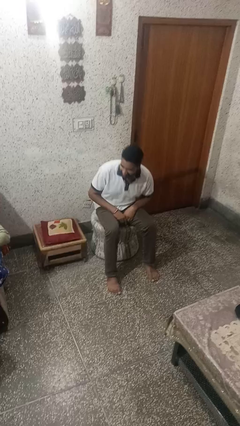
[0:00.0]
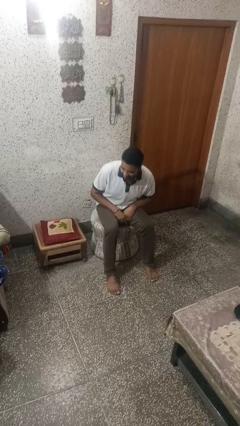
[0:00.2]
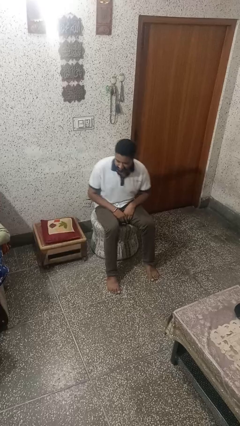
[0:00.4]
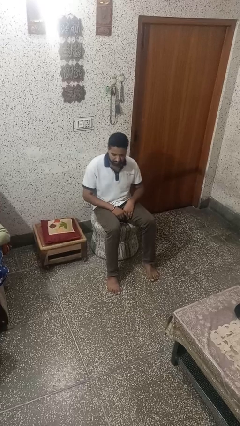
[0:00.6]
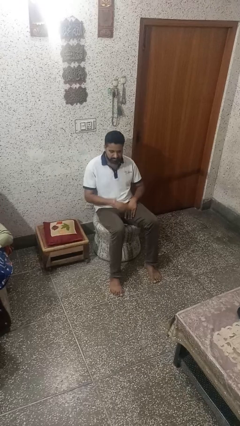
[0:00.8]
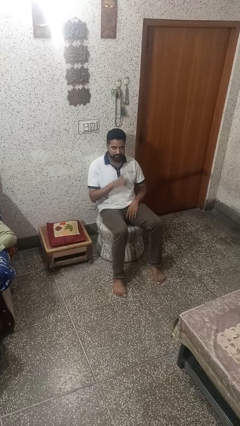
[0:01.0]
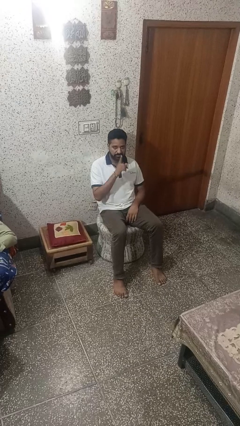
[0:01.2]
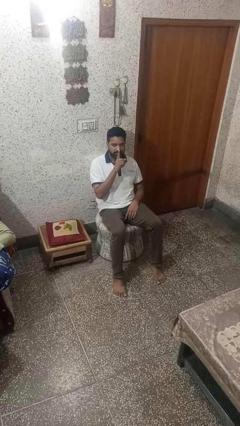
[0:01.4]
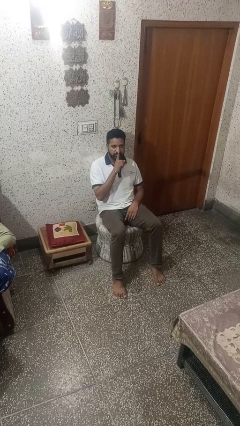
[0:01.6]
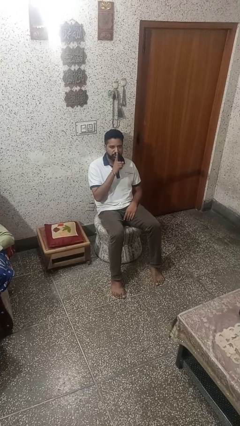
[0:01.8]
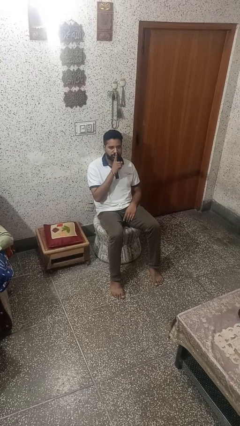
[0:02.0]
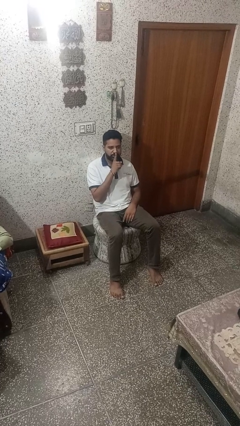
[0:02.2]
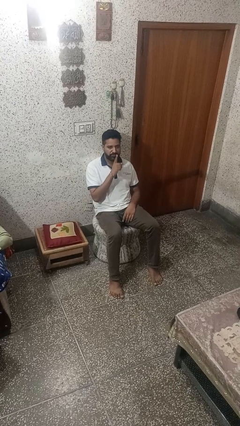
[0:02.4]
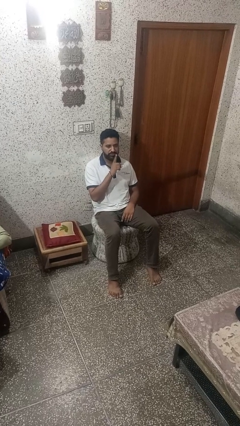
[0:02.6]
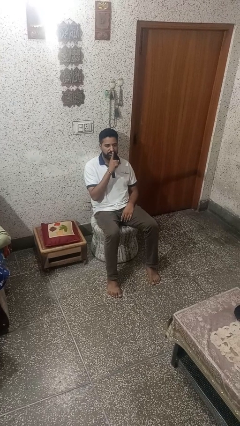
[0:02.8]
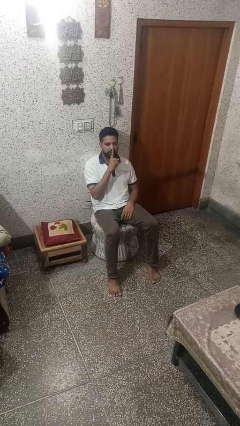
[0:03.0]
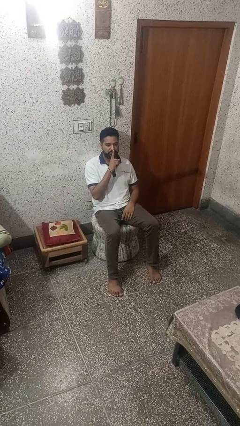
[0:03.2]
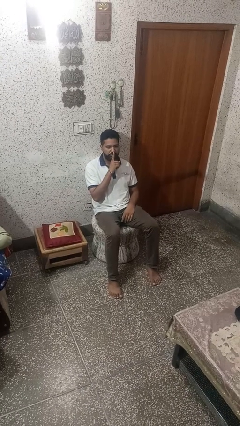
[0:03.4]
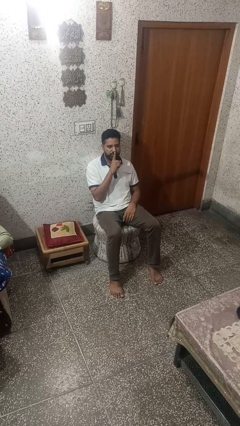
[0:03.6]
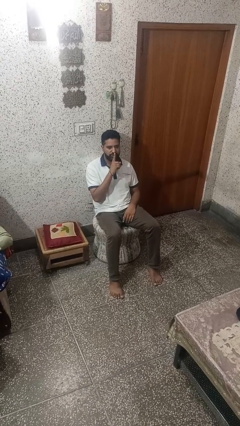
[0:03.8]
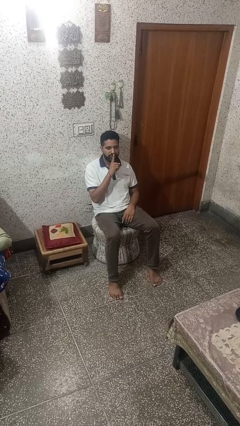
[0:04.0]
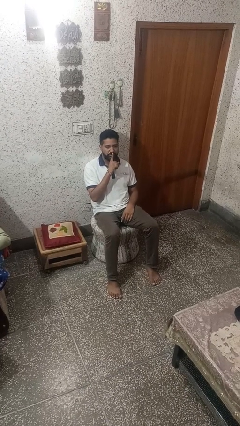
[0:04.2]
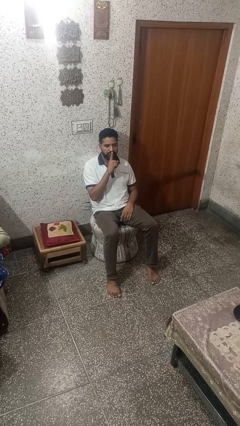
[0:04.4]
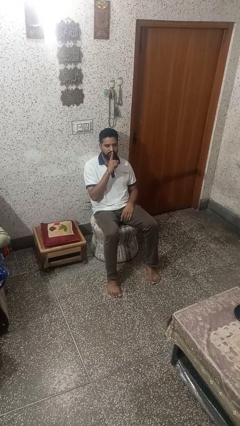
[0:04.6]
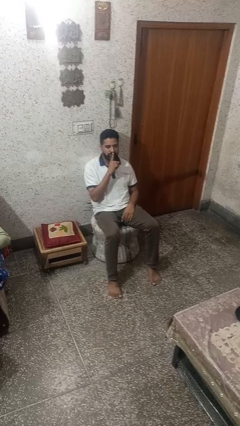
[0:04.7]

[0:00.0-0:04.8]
person gestures be quiet

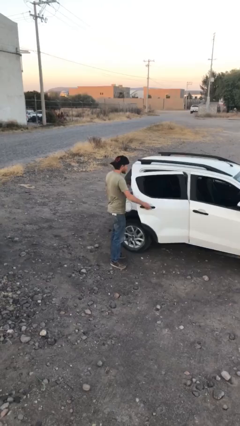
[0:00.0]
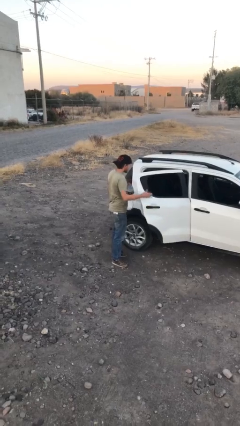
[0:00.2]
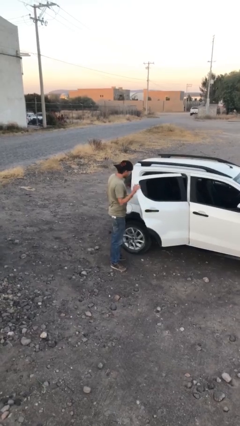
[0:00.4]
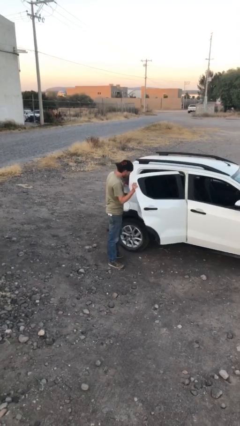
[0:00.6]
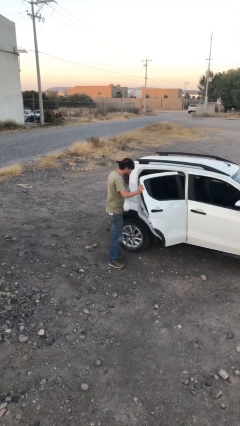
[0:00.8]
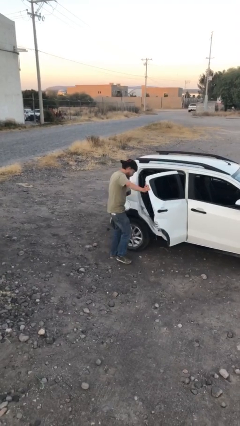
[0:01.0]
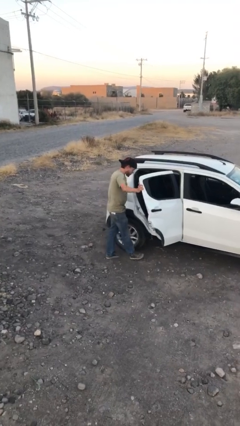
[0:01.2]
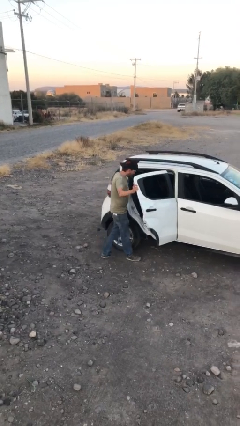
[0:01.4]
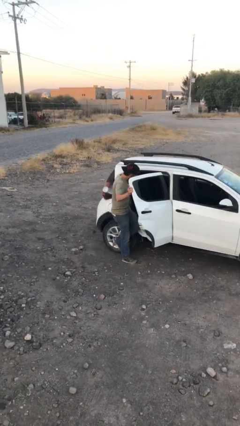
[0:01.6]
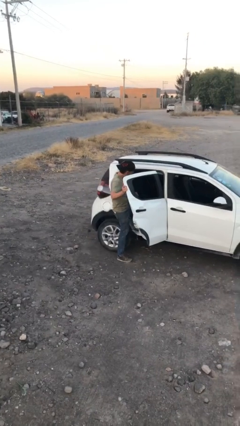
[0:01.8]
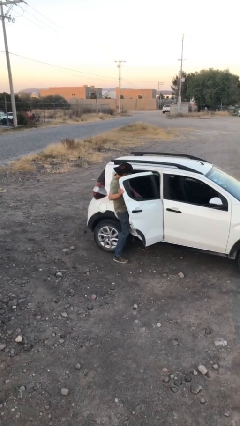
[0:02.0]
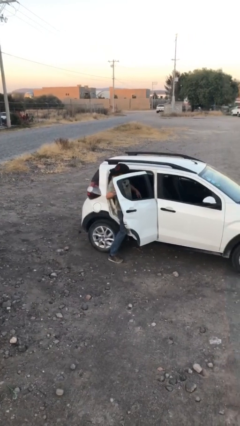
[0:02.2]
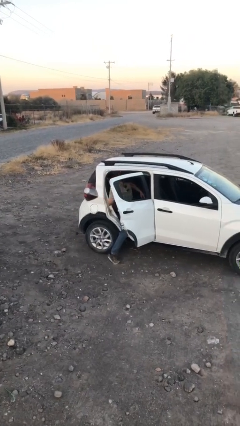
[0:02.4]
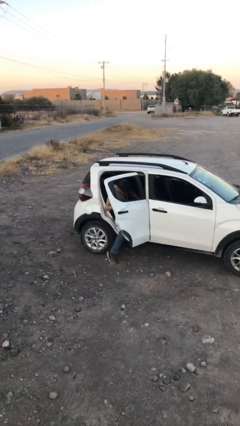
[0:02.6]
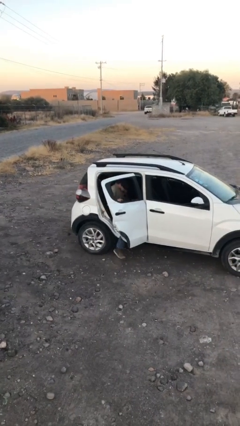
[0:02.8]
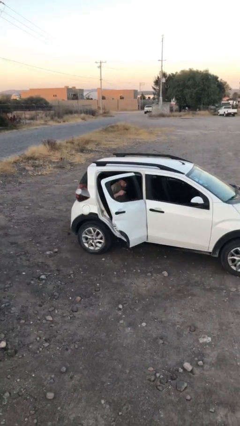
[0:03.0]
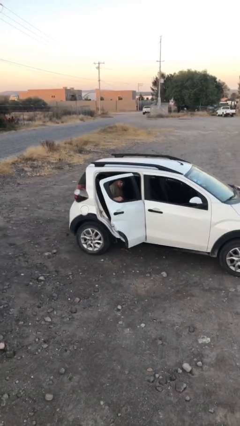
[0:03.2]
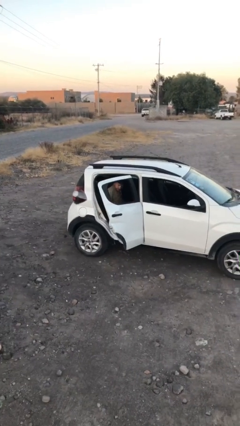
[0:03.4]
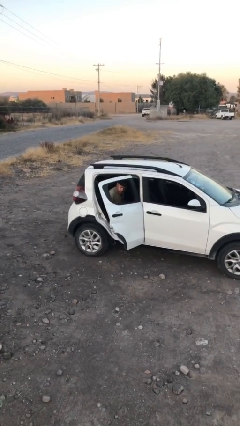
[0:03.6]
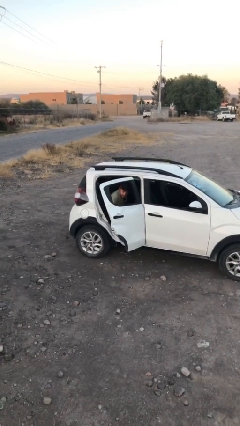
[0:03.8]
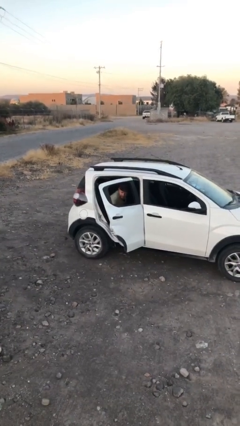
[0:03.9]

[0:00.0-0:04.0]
person enters car

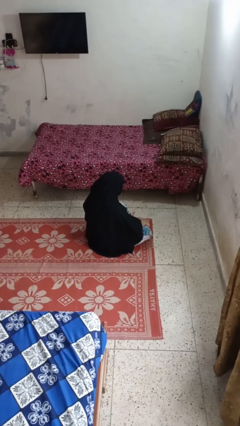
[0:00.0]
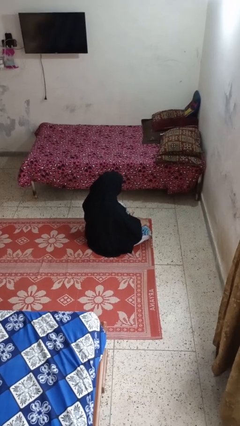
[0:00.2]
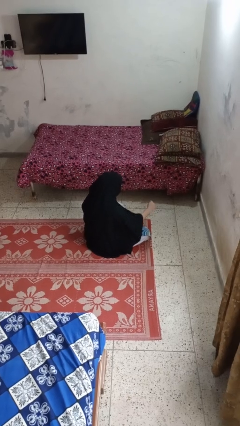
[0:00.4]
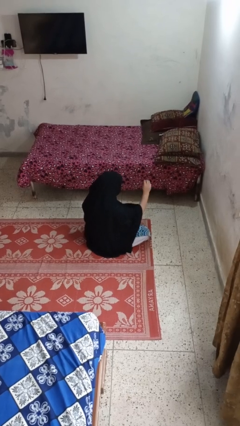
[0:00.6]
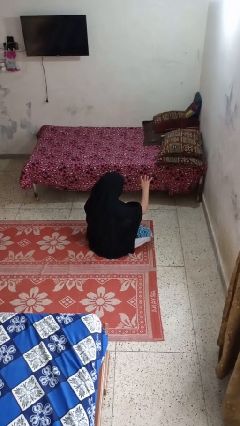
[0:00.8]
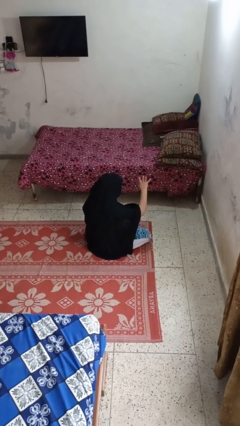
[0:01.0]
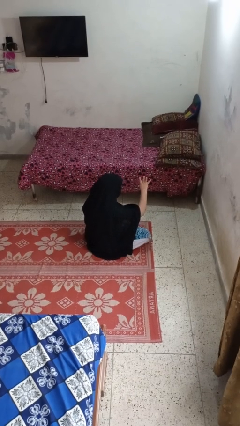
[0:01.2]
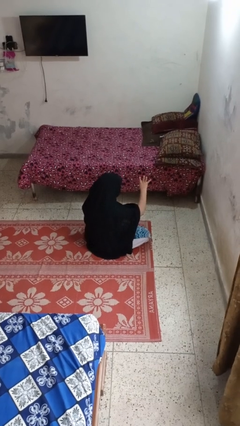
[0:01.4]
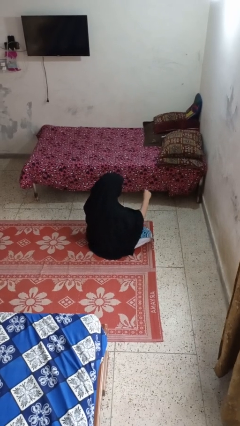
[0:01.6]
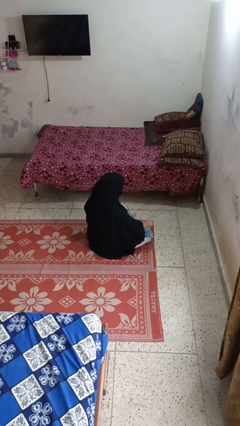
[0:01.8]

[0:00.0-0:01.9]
person gestures number four

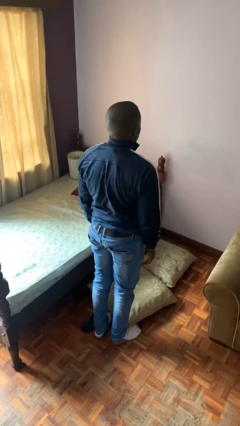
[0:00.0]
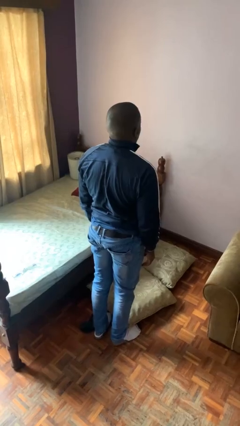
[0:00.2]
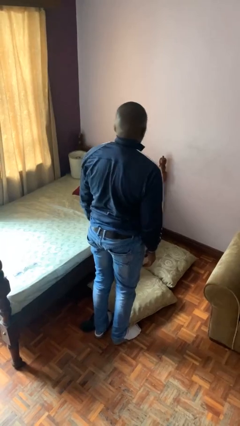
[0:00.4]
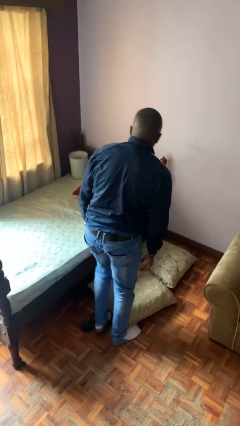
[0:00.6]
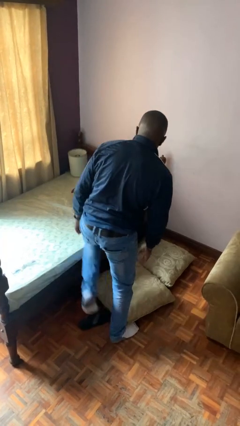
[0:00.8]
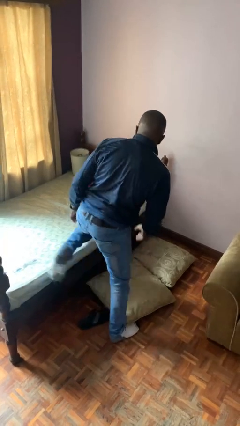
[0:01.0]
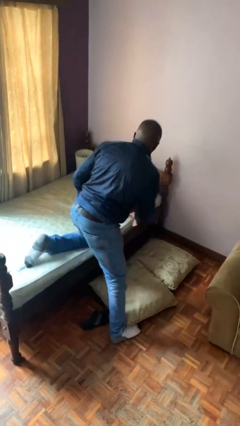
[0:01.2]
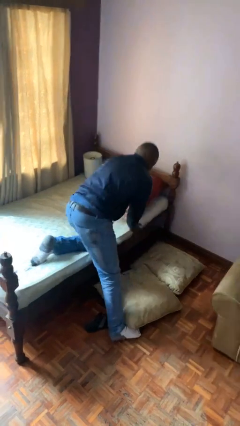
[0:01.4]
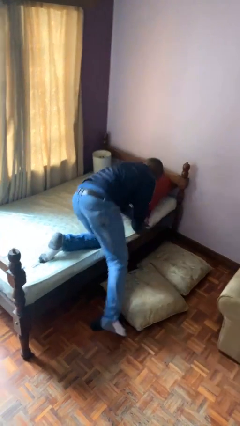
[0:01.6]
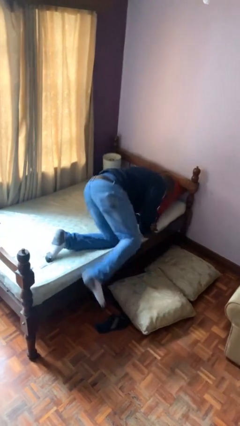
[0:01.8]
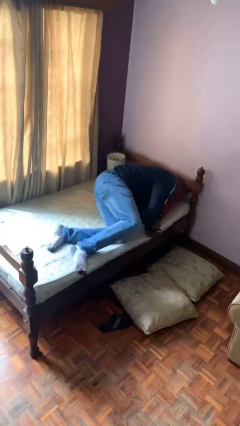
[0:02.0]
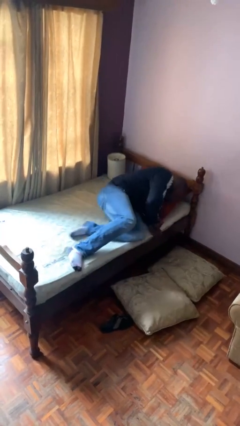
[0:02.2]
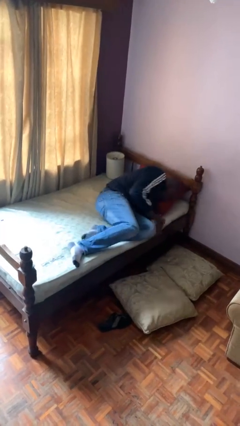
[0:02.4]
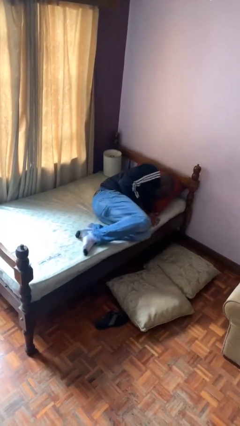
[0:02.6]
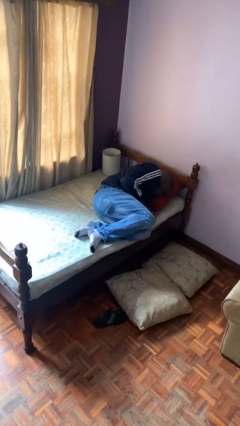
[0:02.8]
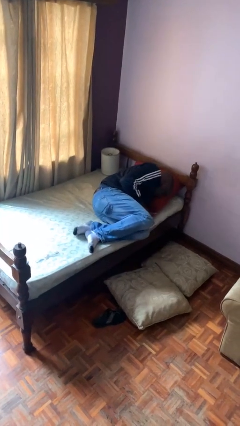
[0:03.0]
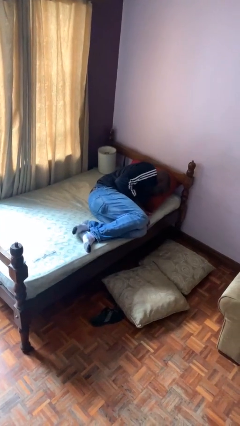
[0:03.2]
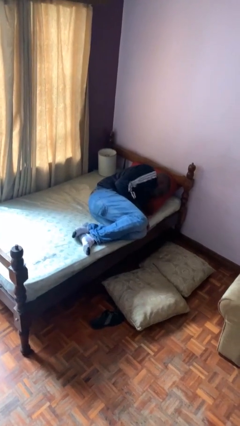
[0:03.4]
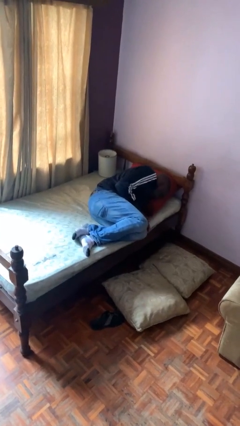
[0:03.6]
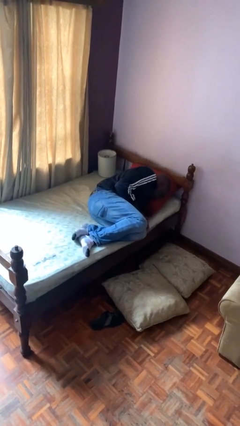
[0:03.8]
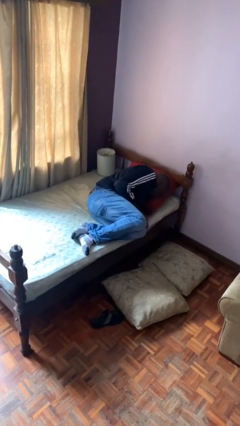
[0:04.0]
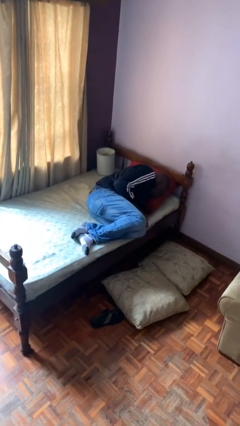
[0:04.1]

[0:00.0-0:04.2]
person lies down on bed

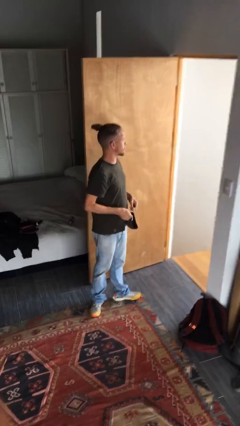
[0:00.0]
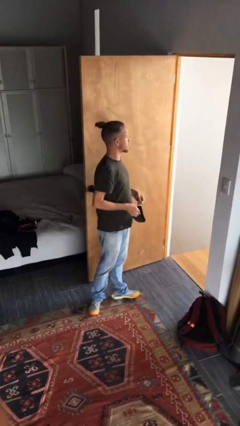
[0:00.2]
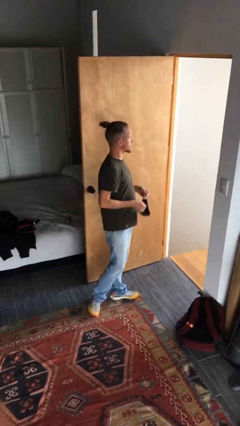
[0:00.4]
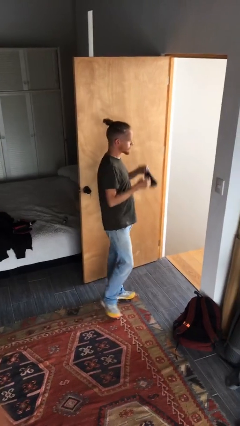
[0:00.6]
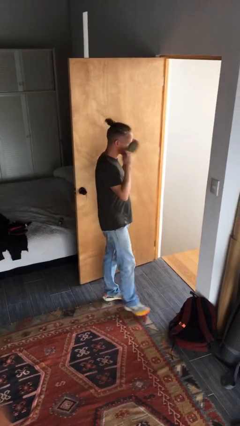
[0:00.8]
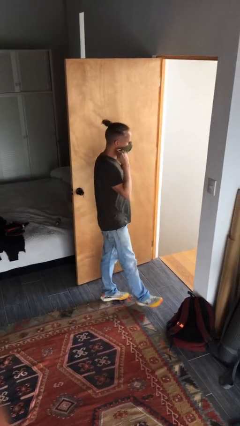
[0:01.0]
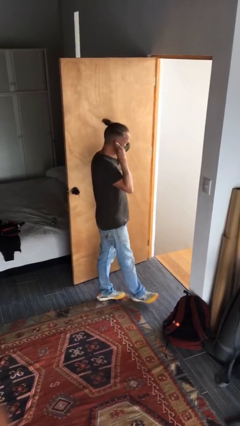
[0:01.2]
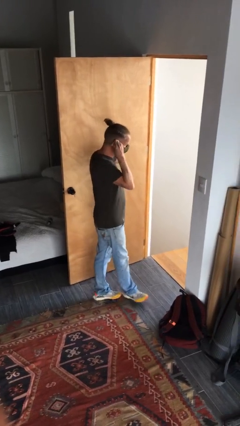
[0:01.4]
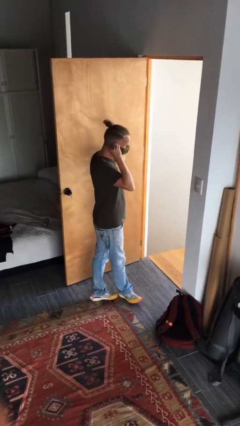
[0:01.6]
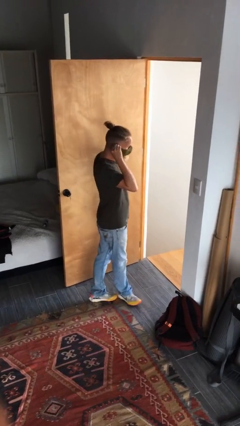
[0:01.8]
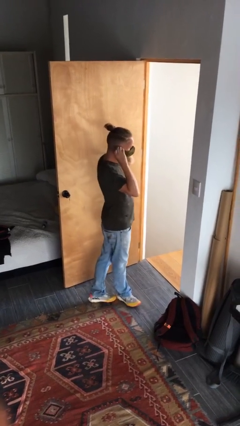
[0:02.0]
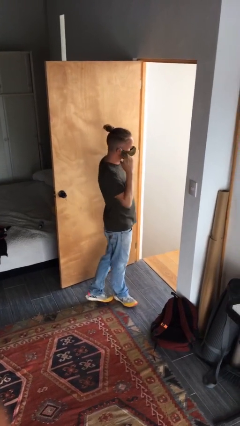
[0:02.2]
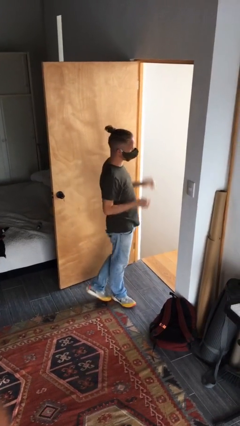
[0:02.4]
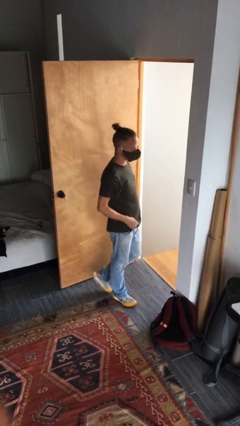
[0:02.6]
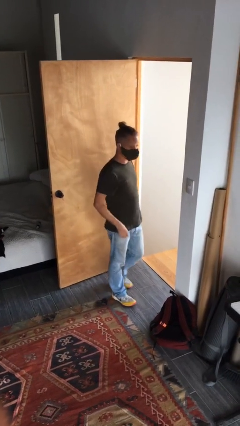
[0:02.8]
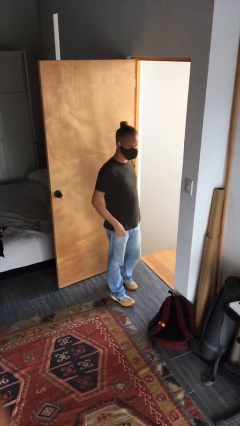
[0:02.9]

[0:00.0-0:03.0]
person puts on facemask
